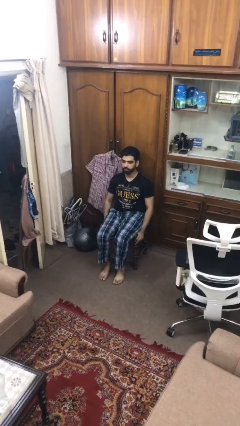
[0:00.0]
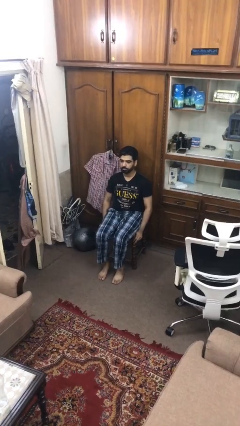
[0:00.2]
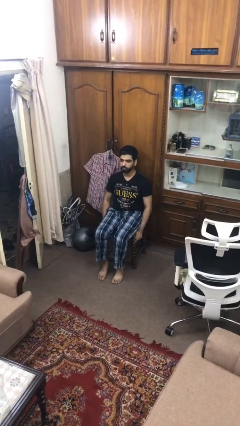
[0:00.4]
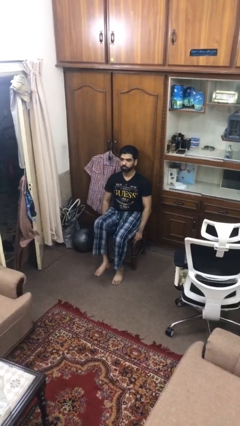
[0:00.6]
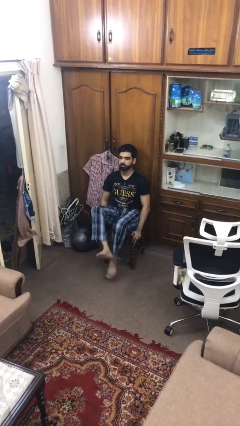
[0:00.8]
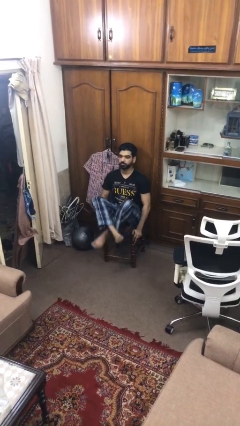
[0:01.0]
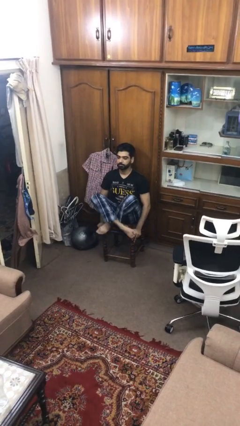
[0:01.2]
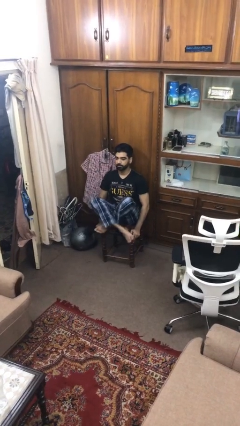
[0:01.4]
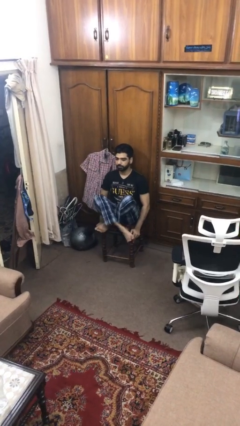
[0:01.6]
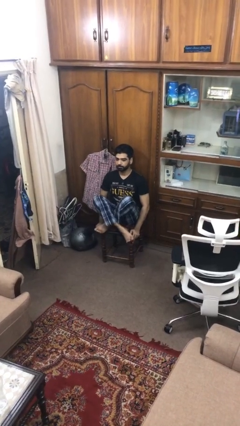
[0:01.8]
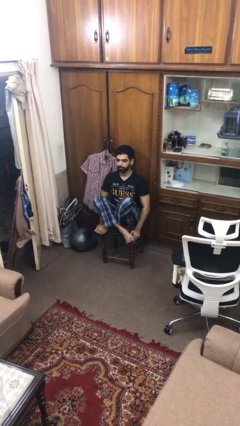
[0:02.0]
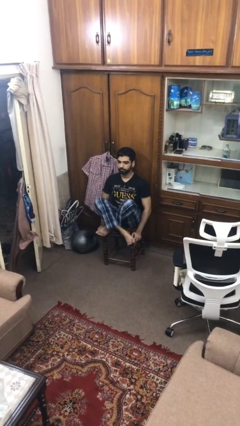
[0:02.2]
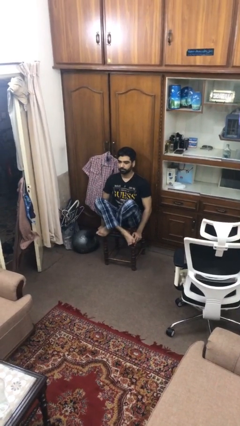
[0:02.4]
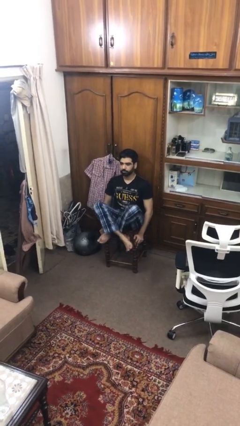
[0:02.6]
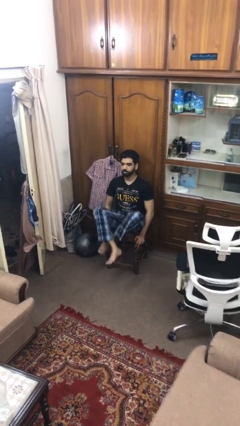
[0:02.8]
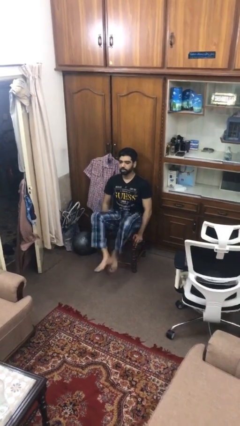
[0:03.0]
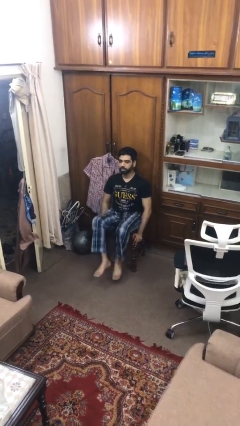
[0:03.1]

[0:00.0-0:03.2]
person crosses legs

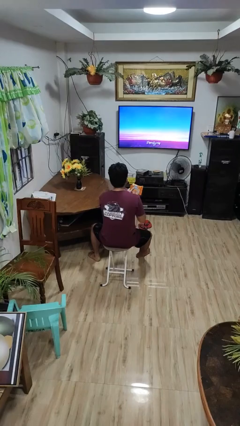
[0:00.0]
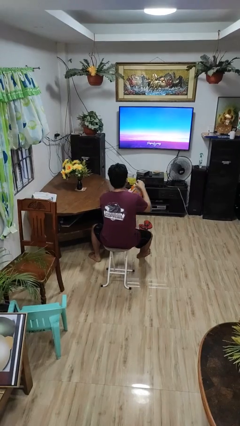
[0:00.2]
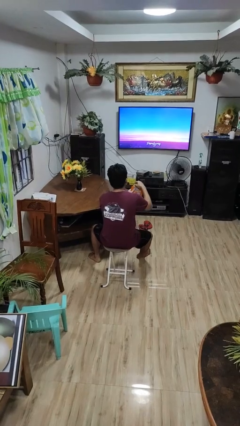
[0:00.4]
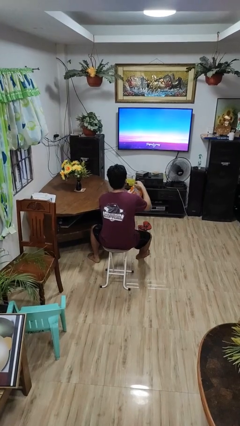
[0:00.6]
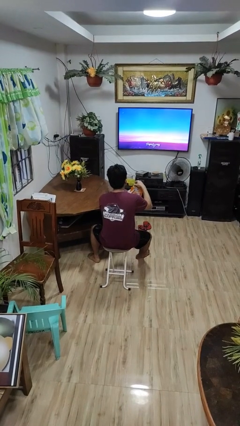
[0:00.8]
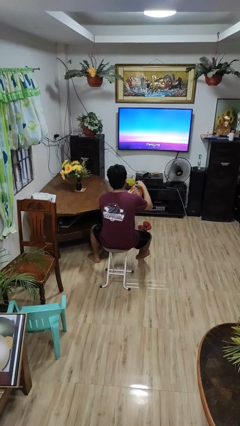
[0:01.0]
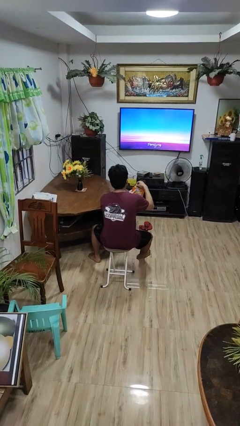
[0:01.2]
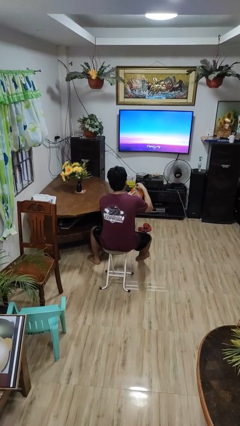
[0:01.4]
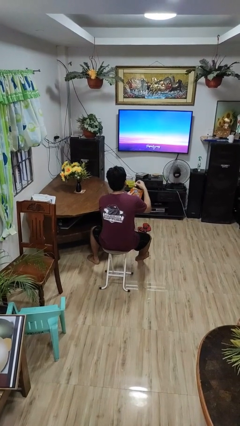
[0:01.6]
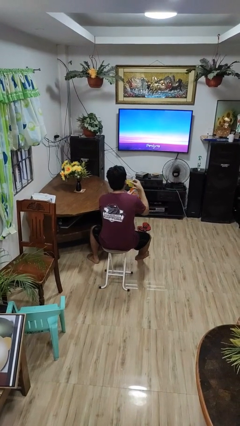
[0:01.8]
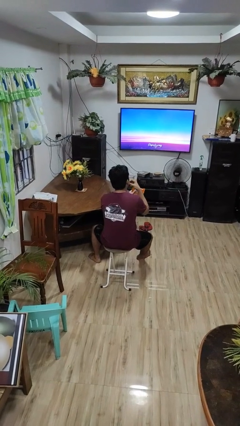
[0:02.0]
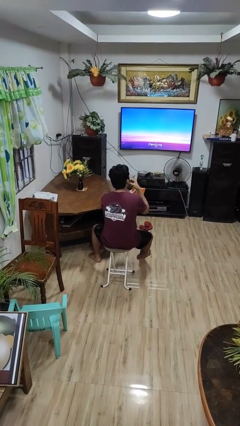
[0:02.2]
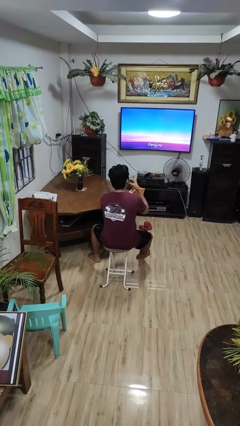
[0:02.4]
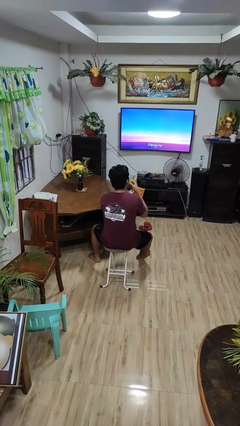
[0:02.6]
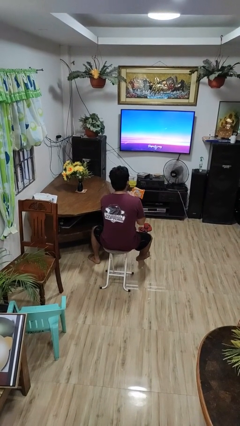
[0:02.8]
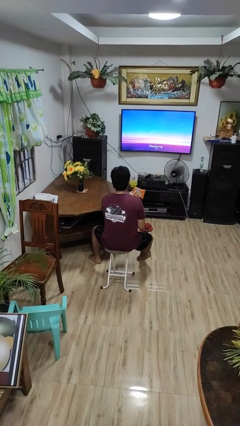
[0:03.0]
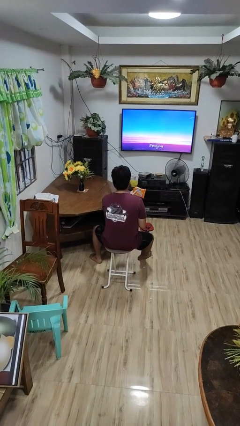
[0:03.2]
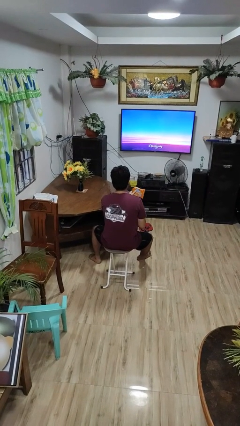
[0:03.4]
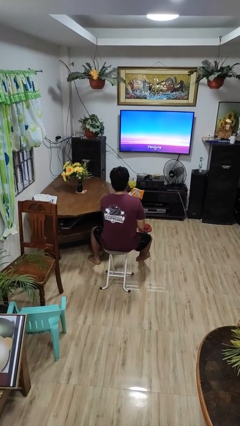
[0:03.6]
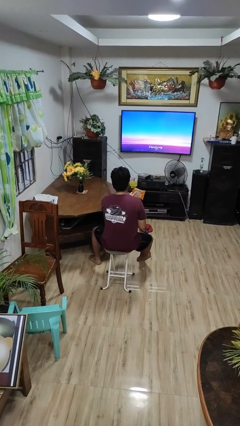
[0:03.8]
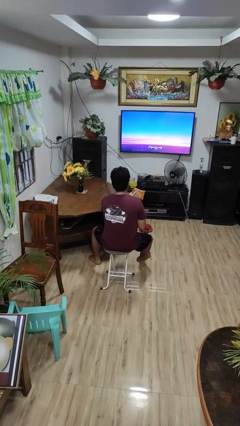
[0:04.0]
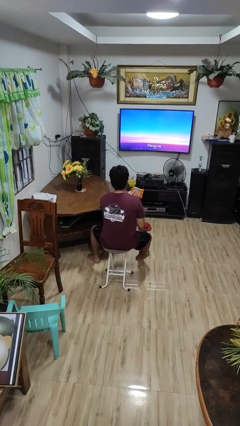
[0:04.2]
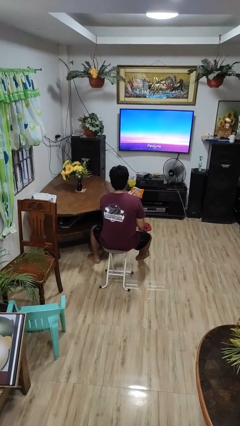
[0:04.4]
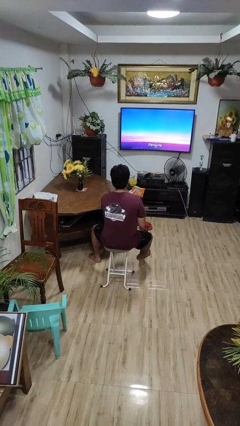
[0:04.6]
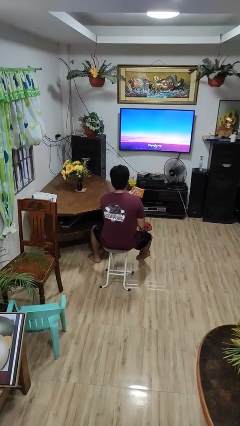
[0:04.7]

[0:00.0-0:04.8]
person eats snack from bag

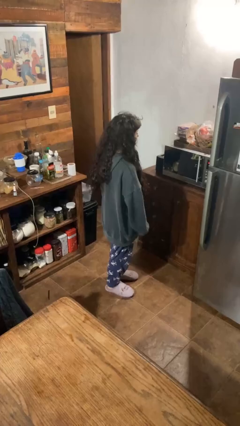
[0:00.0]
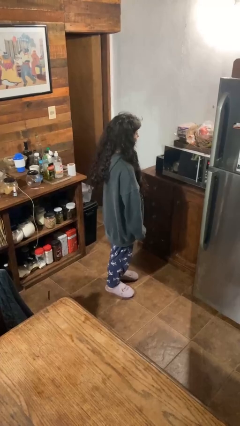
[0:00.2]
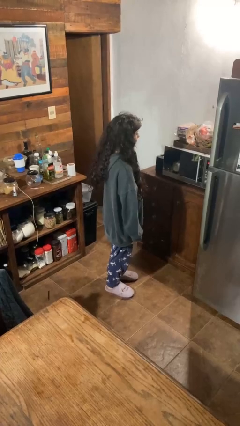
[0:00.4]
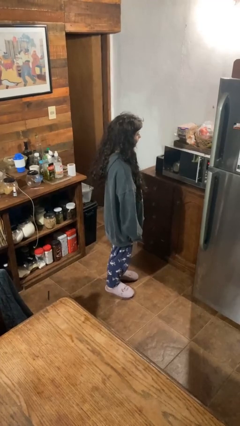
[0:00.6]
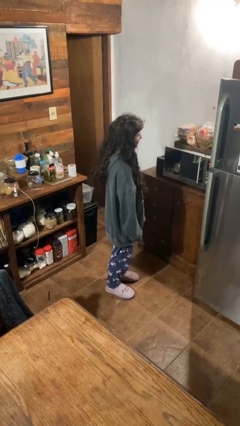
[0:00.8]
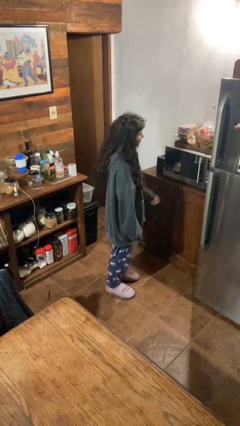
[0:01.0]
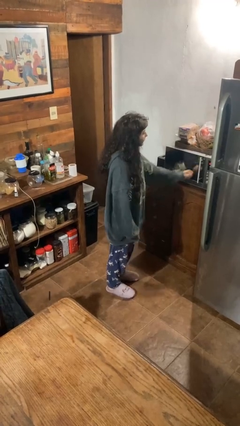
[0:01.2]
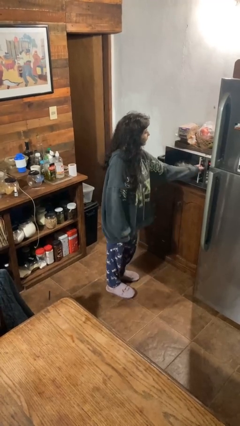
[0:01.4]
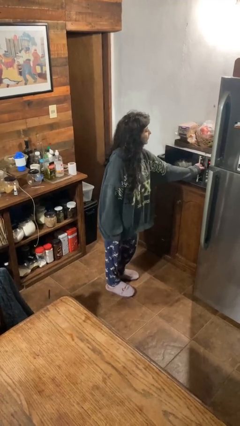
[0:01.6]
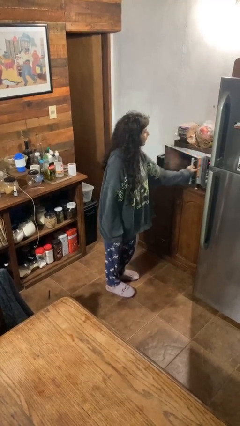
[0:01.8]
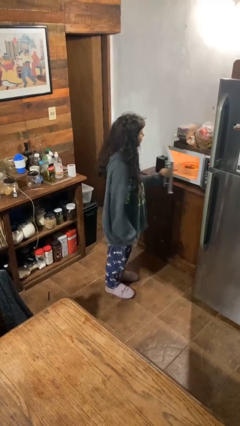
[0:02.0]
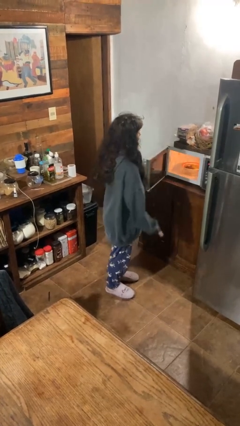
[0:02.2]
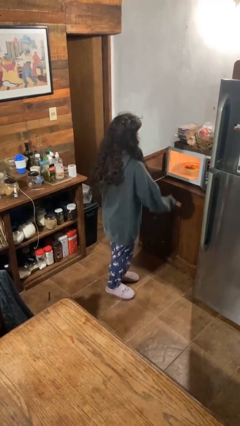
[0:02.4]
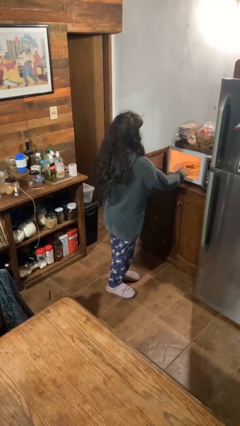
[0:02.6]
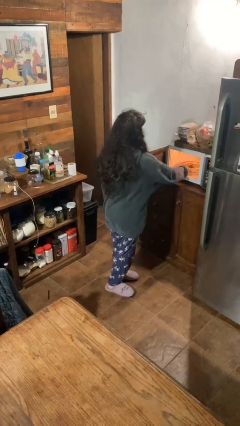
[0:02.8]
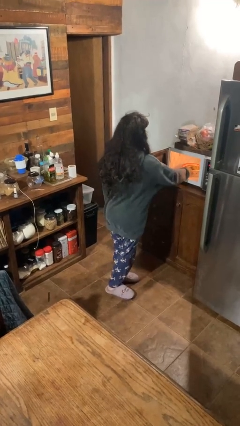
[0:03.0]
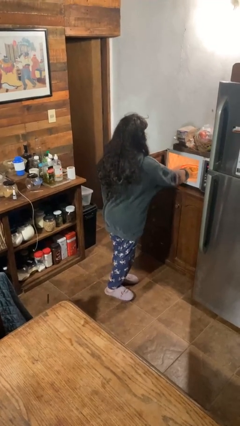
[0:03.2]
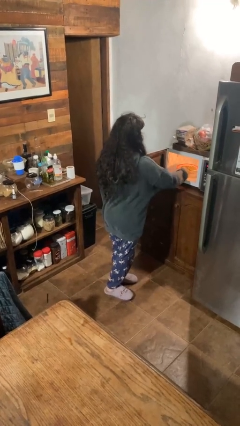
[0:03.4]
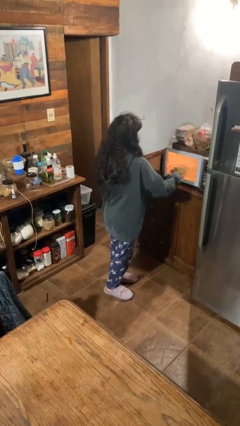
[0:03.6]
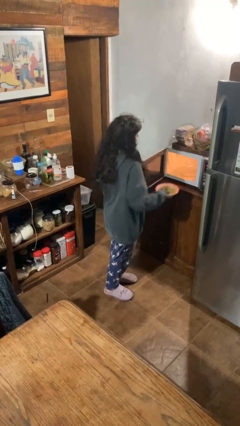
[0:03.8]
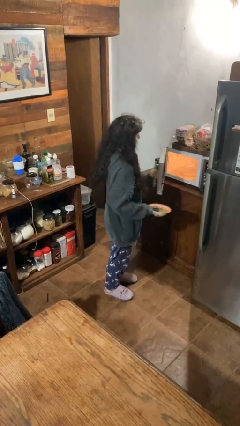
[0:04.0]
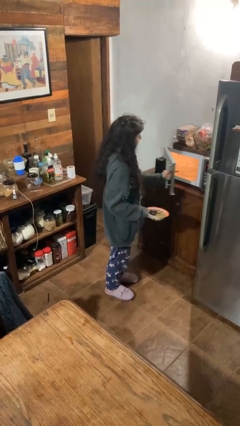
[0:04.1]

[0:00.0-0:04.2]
person takes object from microwave

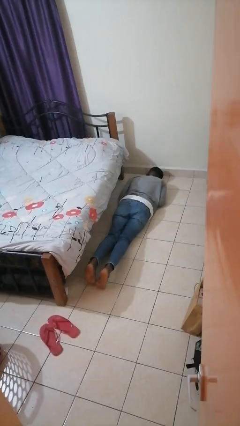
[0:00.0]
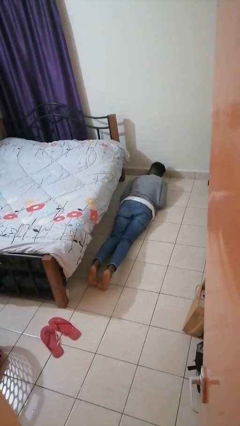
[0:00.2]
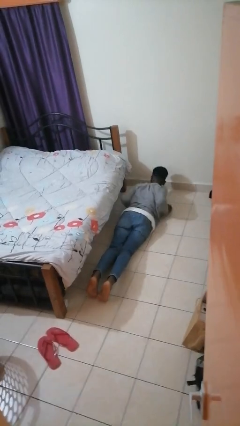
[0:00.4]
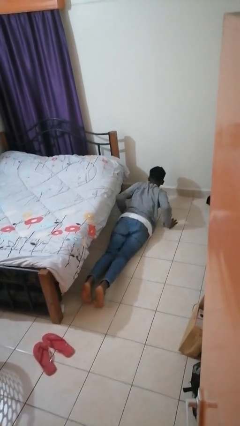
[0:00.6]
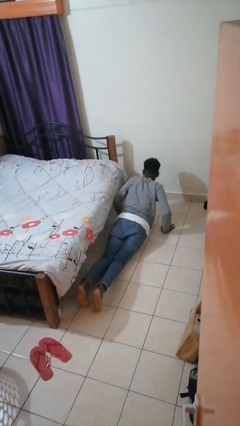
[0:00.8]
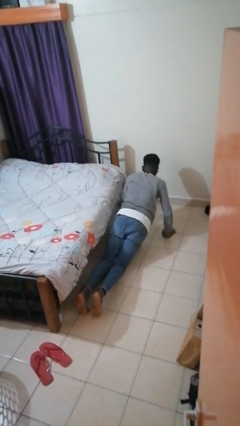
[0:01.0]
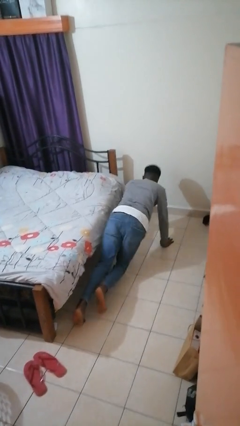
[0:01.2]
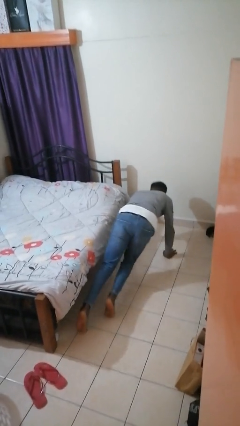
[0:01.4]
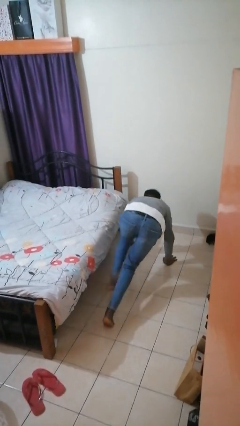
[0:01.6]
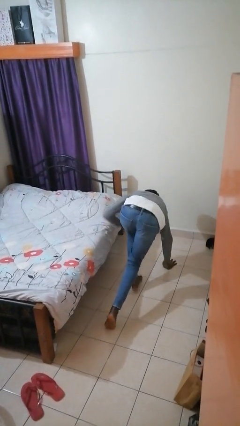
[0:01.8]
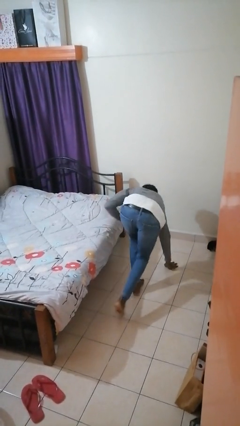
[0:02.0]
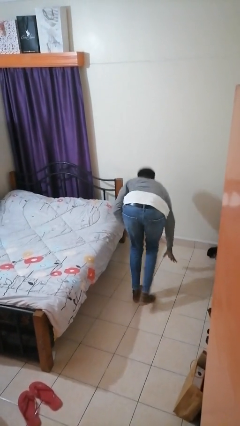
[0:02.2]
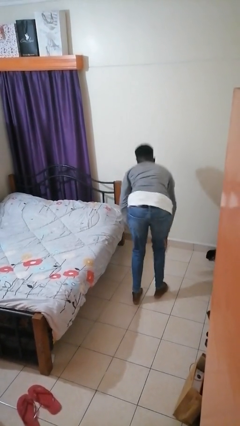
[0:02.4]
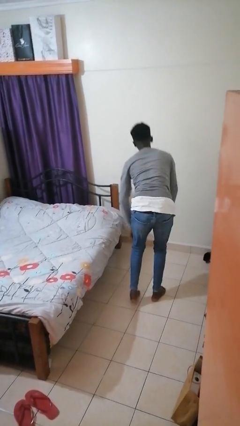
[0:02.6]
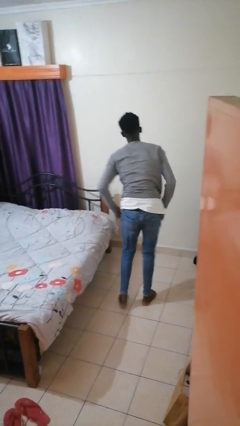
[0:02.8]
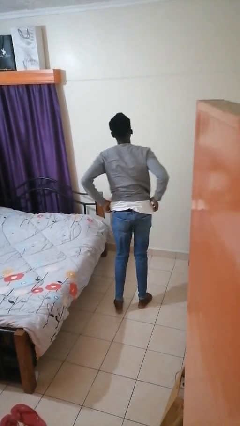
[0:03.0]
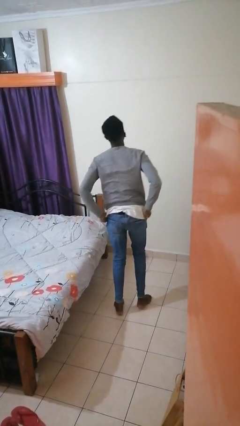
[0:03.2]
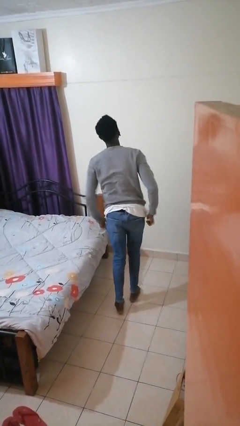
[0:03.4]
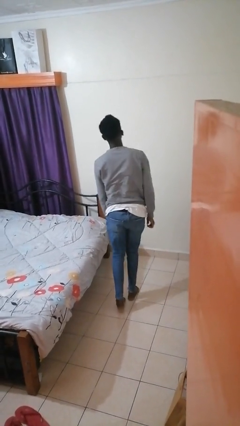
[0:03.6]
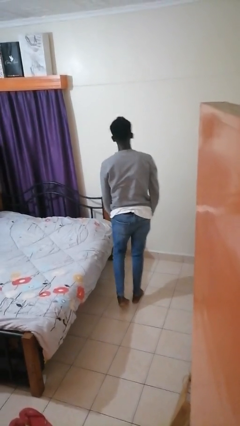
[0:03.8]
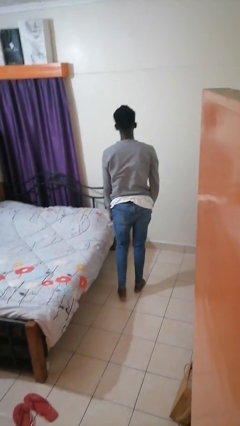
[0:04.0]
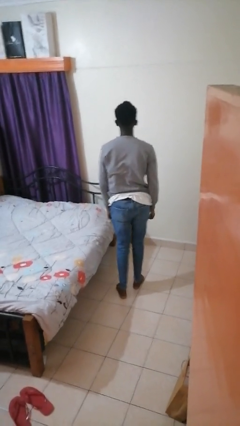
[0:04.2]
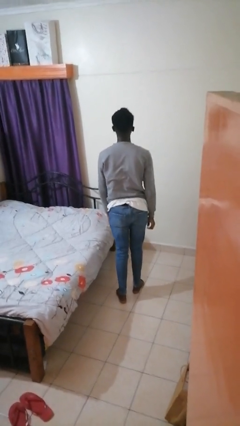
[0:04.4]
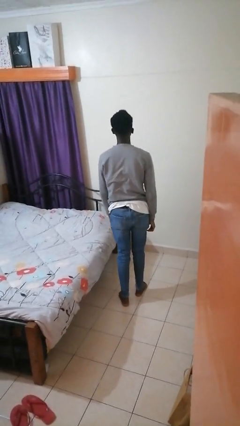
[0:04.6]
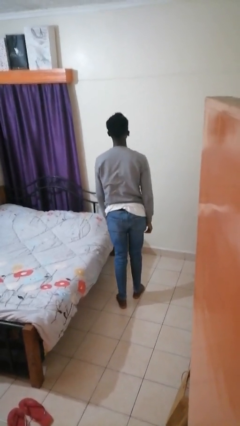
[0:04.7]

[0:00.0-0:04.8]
person stands up from floor

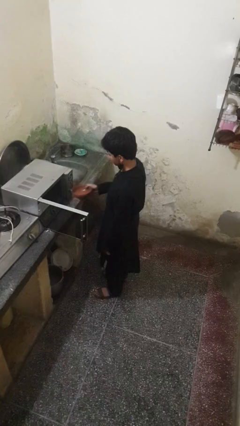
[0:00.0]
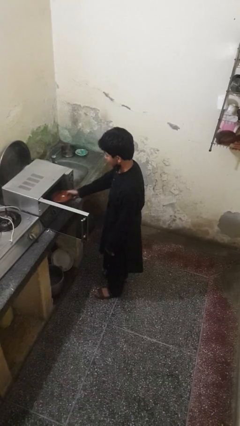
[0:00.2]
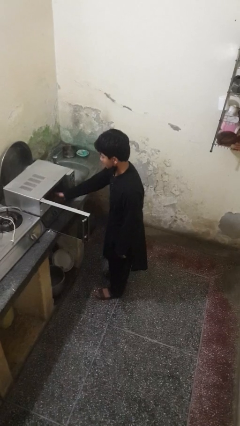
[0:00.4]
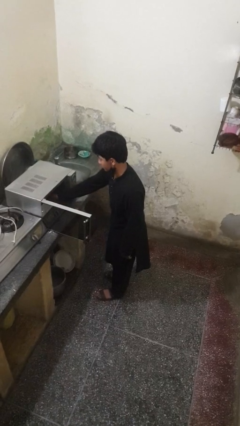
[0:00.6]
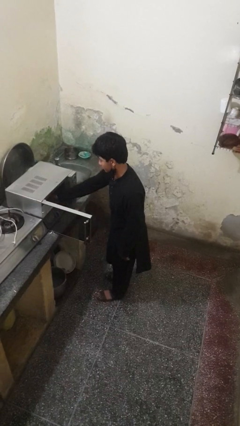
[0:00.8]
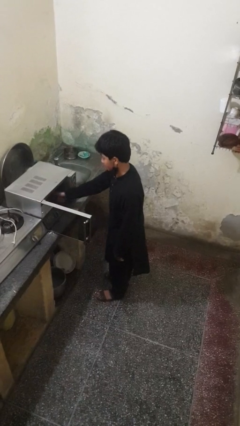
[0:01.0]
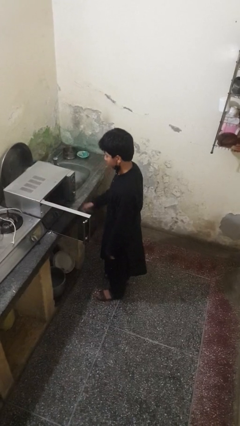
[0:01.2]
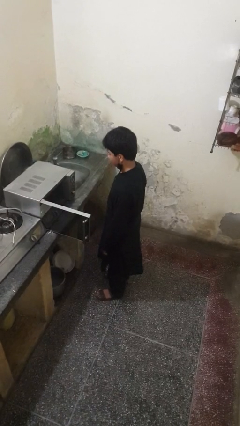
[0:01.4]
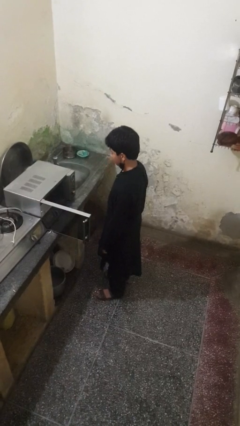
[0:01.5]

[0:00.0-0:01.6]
person puts object into microwave
